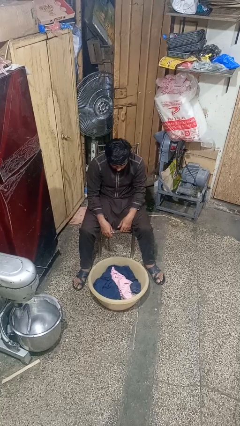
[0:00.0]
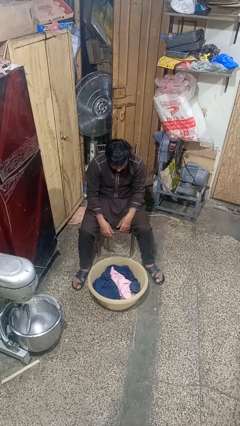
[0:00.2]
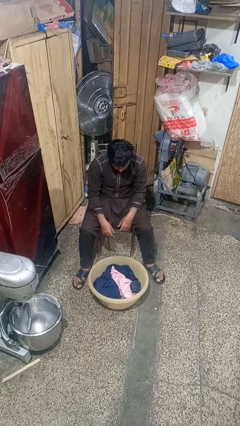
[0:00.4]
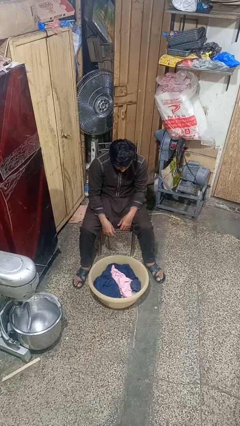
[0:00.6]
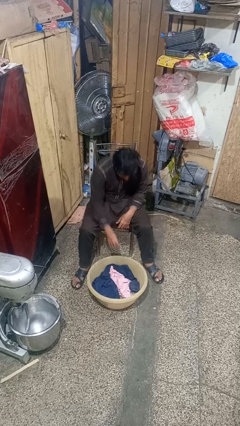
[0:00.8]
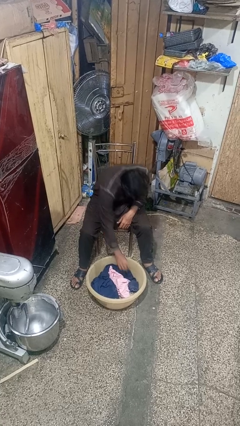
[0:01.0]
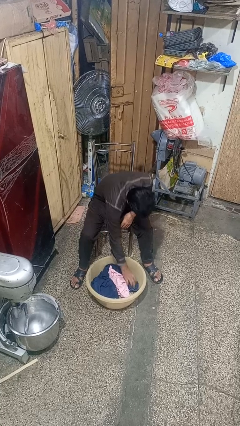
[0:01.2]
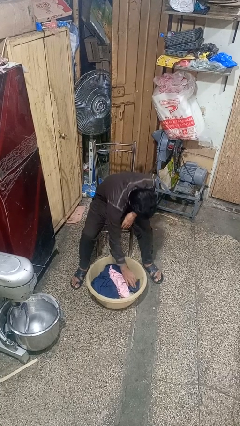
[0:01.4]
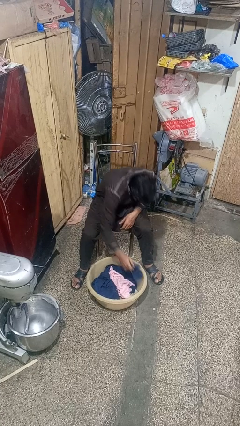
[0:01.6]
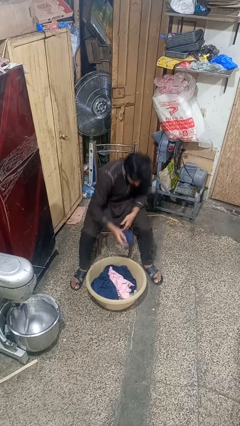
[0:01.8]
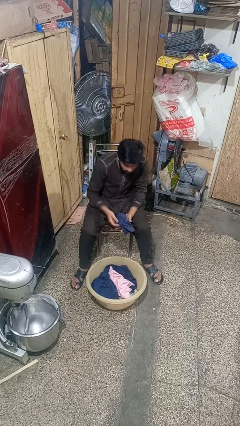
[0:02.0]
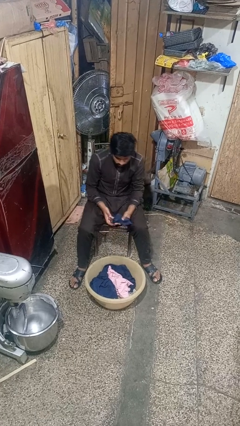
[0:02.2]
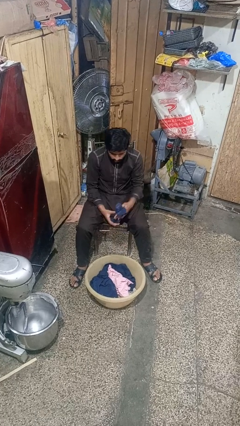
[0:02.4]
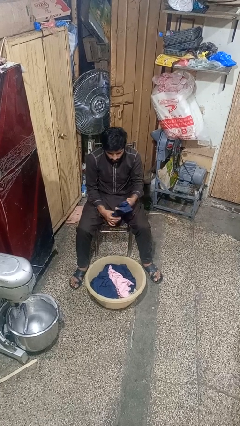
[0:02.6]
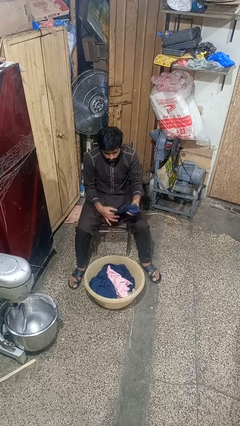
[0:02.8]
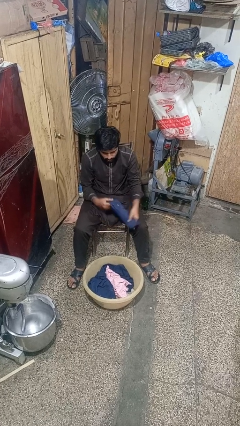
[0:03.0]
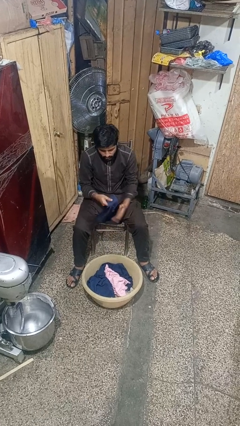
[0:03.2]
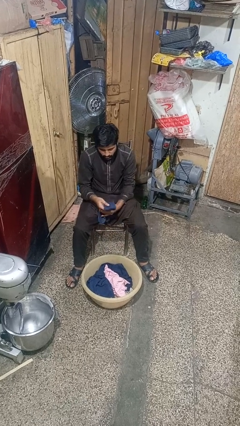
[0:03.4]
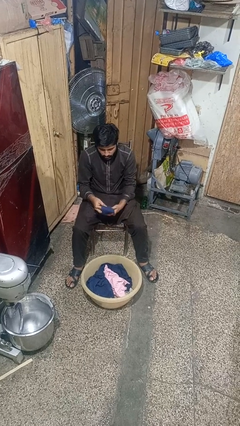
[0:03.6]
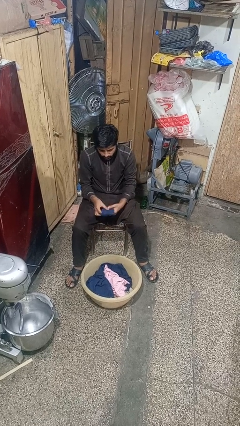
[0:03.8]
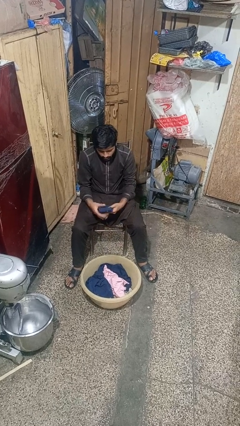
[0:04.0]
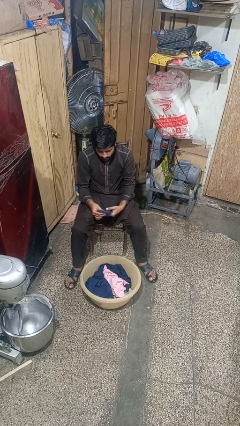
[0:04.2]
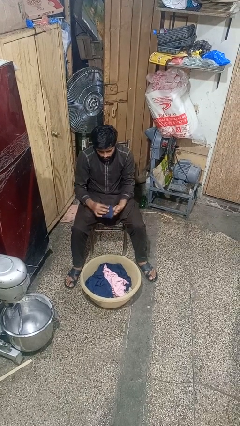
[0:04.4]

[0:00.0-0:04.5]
person folds socks

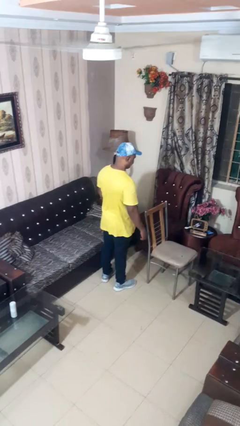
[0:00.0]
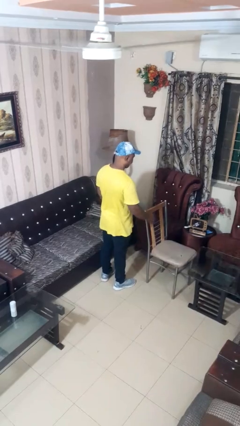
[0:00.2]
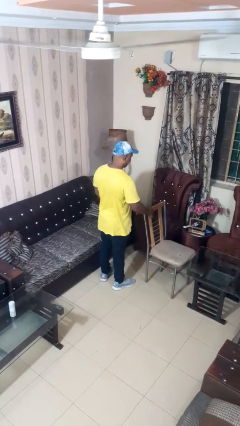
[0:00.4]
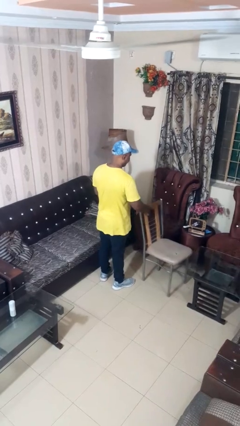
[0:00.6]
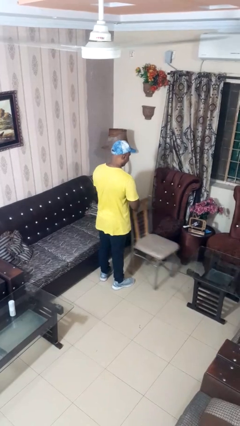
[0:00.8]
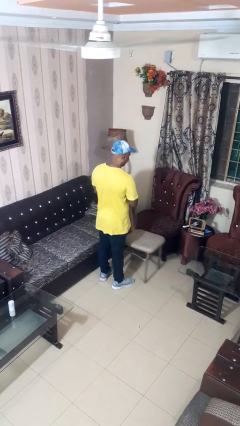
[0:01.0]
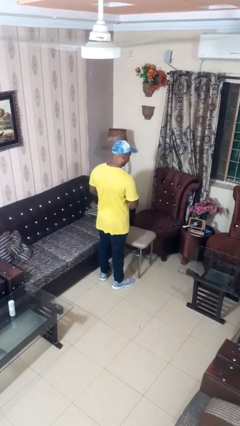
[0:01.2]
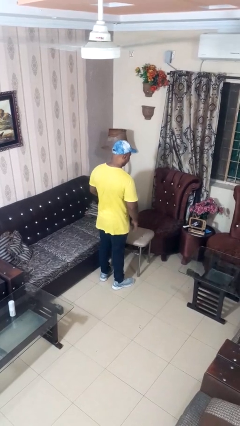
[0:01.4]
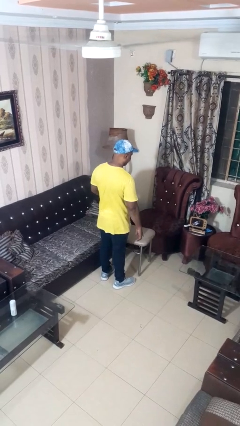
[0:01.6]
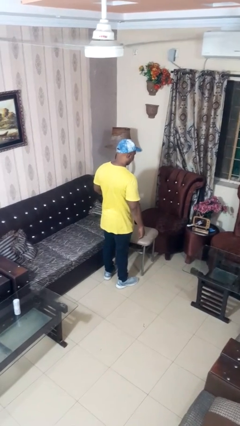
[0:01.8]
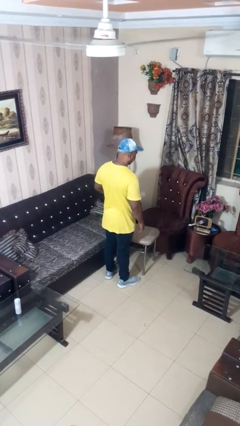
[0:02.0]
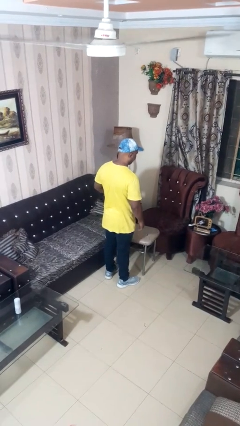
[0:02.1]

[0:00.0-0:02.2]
person pulls out chair

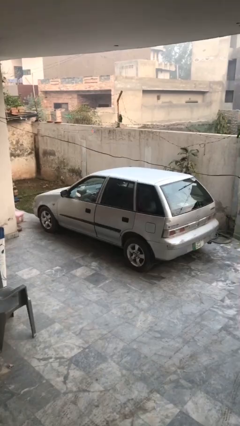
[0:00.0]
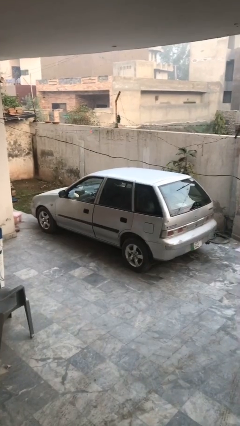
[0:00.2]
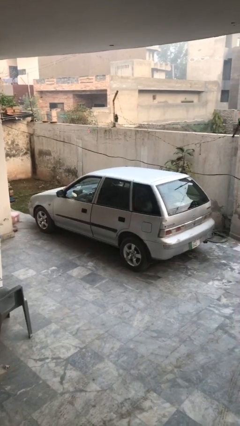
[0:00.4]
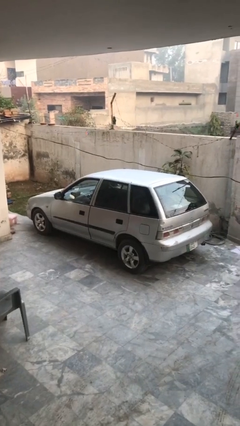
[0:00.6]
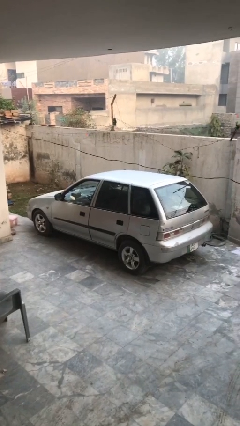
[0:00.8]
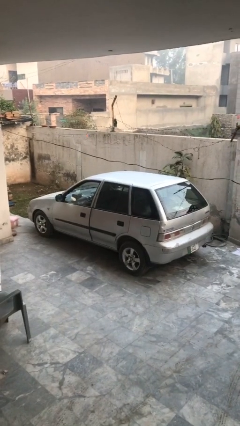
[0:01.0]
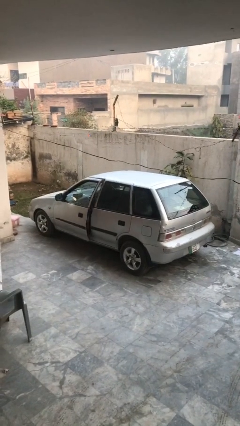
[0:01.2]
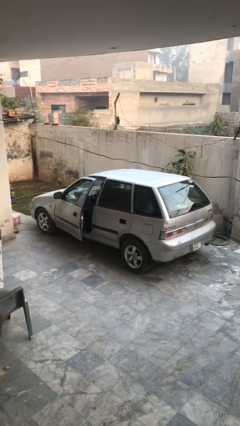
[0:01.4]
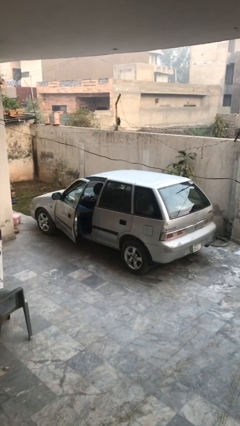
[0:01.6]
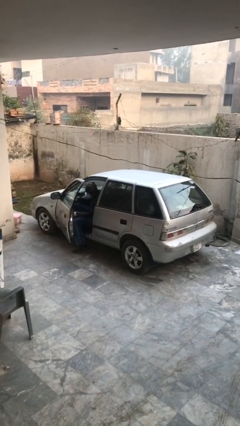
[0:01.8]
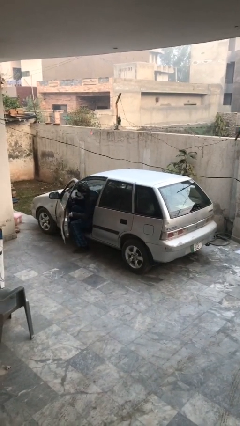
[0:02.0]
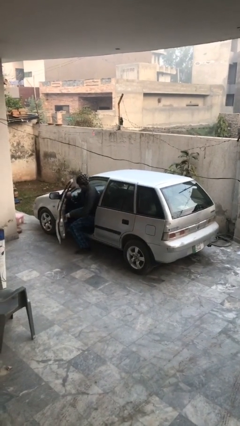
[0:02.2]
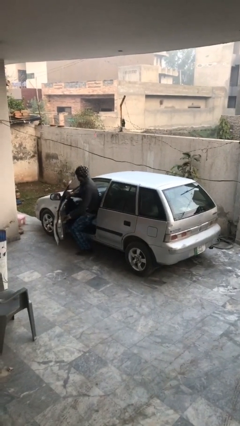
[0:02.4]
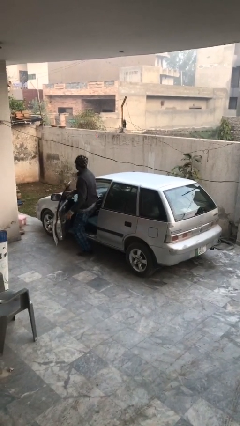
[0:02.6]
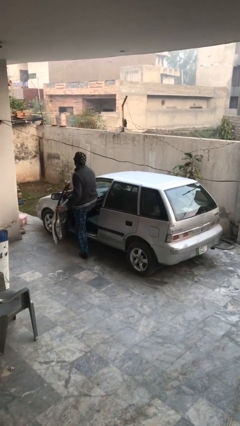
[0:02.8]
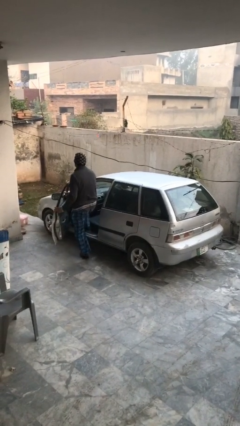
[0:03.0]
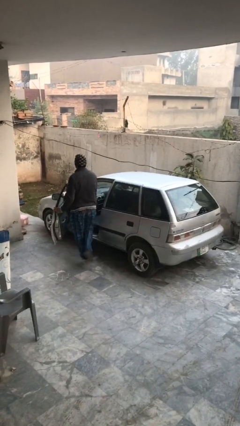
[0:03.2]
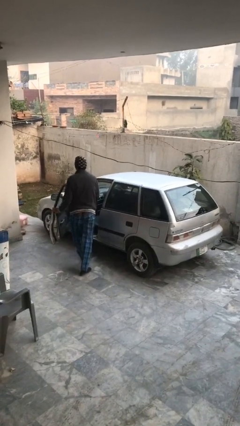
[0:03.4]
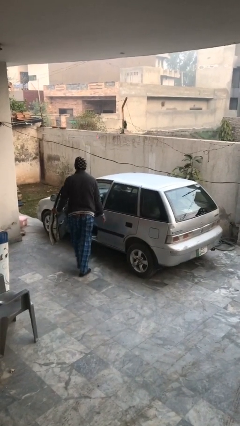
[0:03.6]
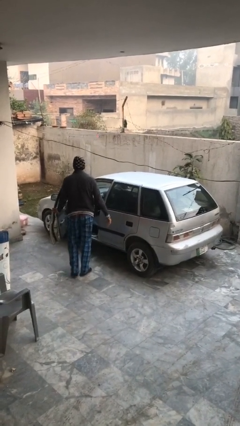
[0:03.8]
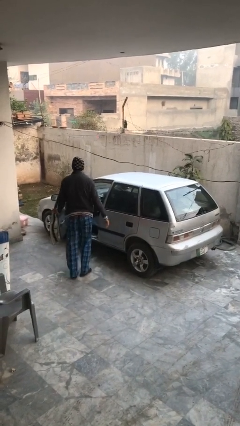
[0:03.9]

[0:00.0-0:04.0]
car drops off person

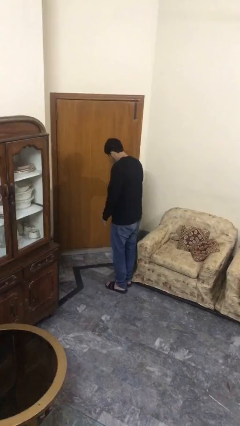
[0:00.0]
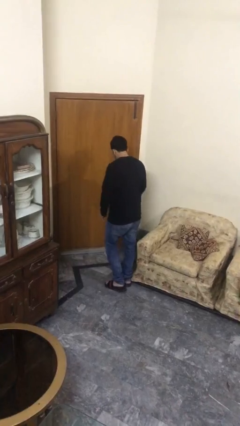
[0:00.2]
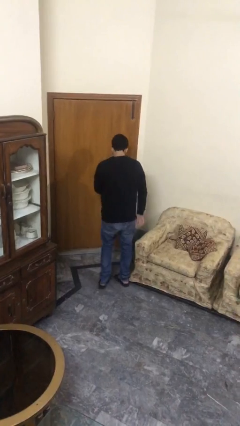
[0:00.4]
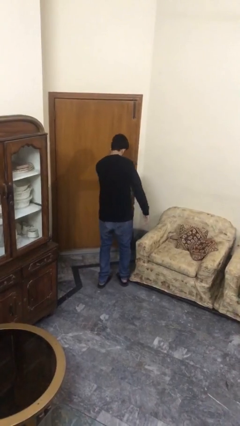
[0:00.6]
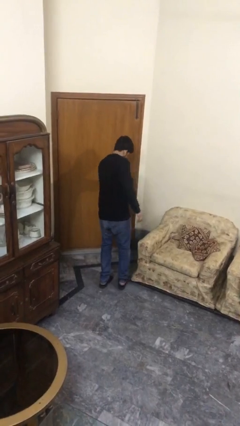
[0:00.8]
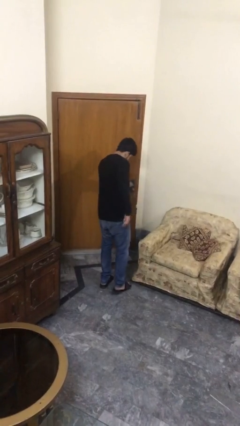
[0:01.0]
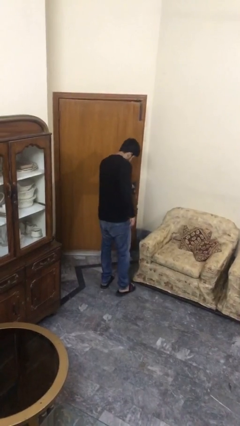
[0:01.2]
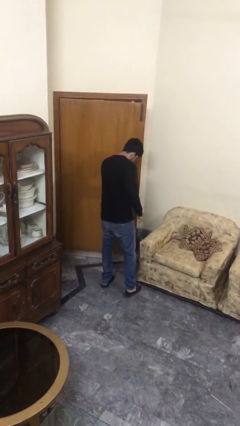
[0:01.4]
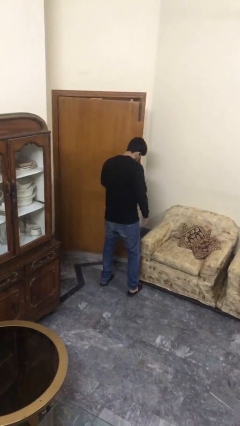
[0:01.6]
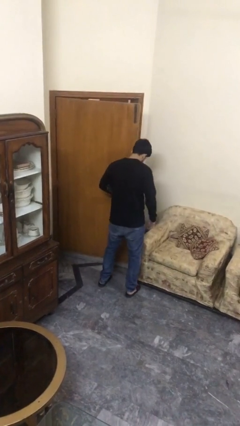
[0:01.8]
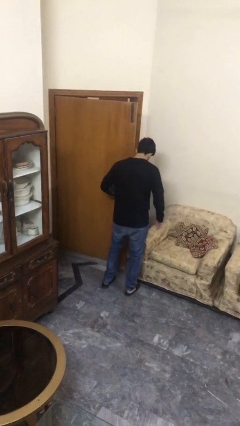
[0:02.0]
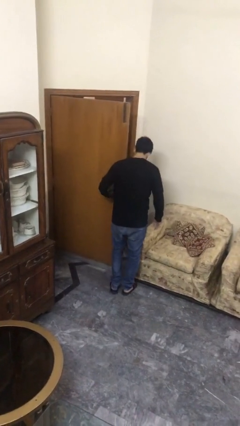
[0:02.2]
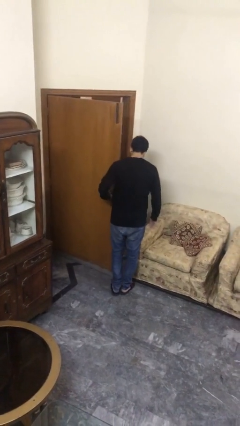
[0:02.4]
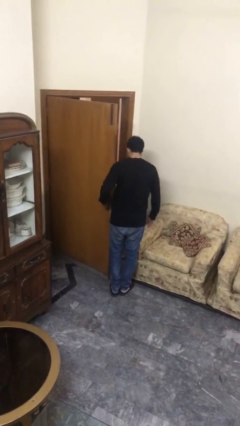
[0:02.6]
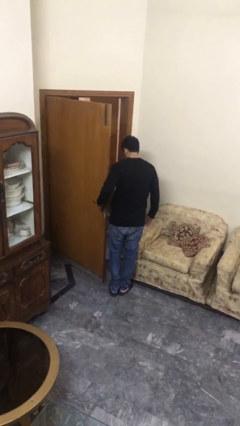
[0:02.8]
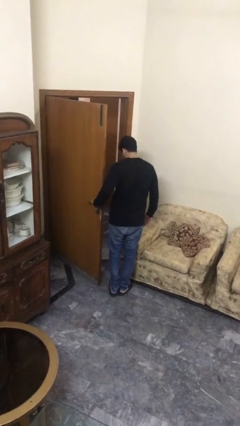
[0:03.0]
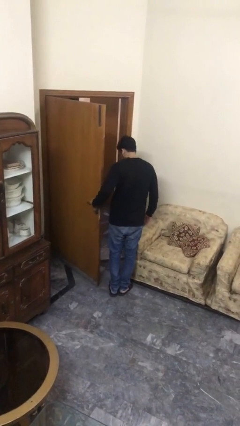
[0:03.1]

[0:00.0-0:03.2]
person opens facility door

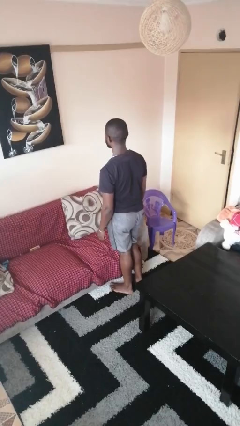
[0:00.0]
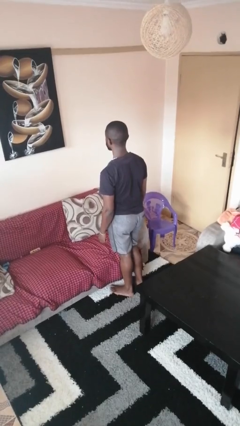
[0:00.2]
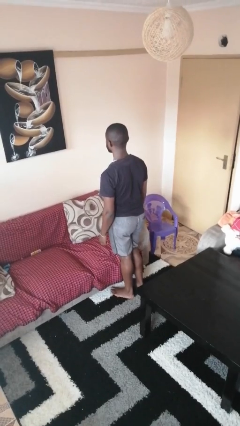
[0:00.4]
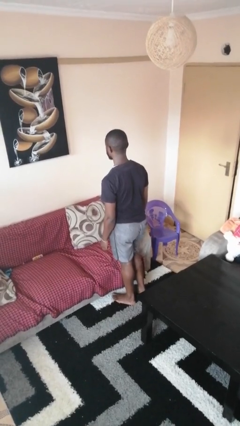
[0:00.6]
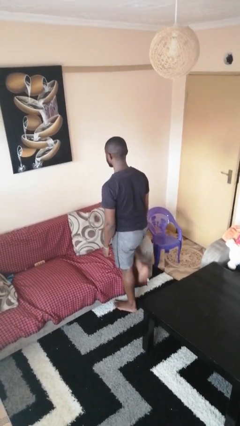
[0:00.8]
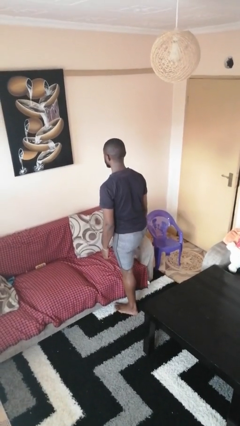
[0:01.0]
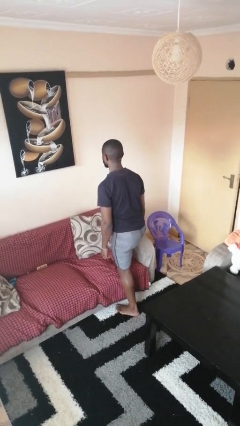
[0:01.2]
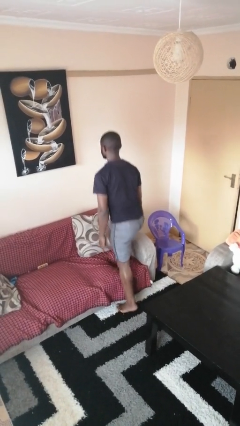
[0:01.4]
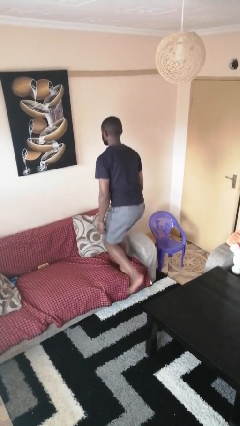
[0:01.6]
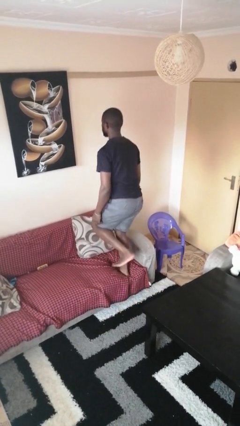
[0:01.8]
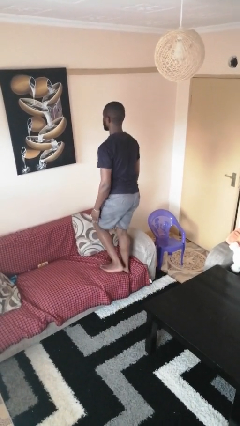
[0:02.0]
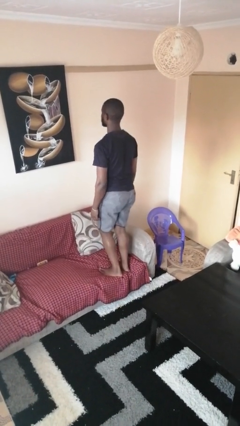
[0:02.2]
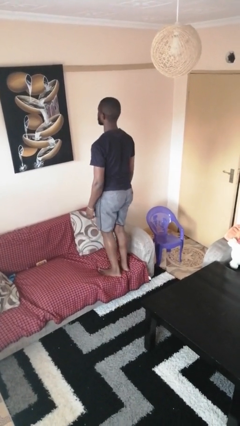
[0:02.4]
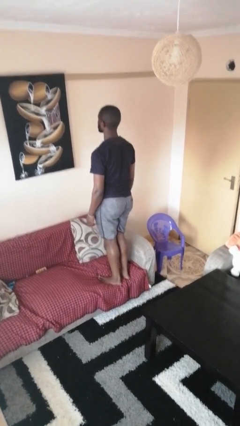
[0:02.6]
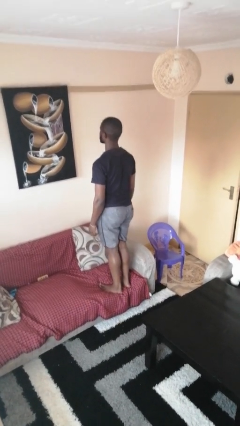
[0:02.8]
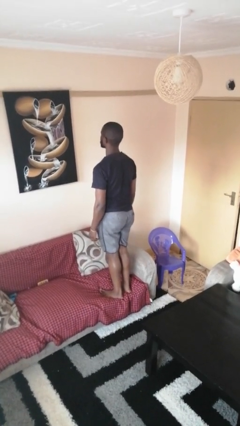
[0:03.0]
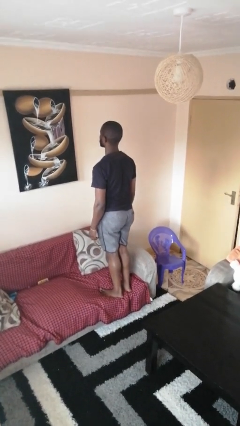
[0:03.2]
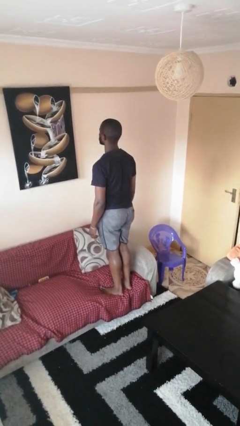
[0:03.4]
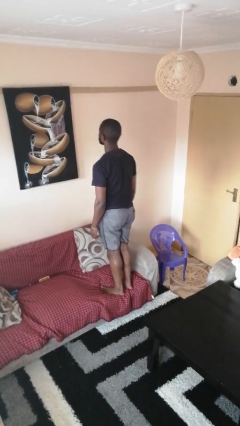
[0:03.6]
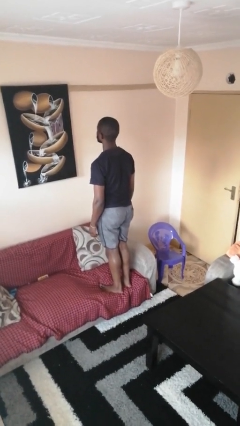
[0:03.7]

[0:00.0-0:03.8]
person climbs on couch
